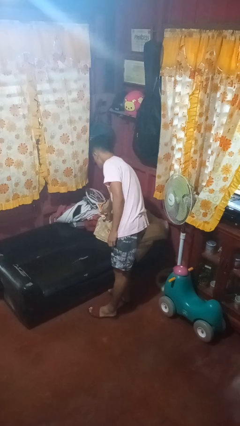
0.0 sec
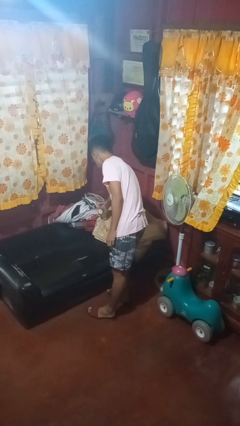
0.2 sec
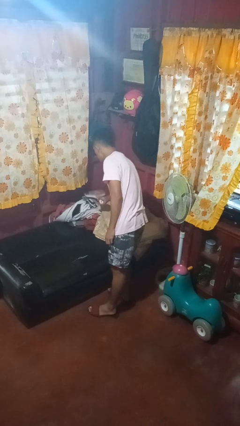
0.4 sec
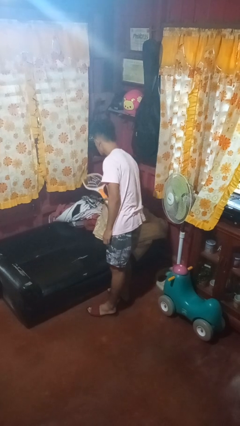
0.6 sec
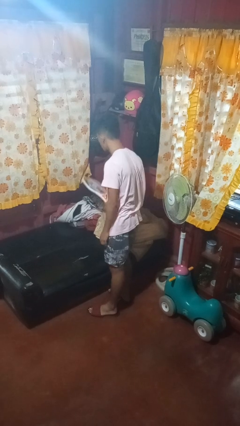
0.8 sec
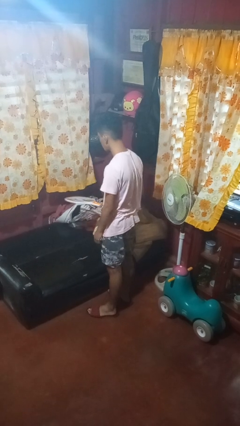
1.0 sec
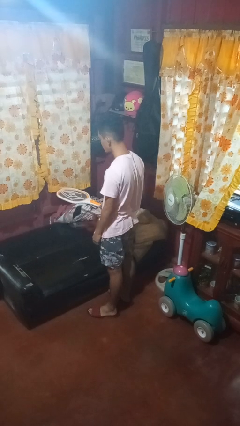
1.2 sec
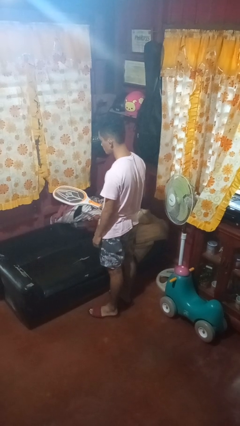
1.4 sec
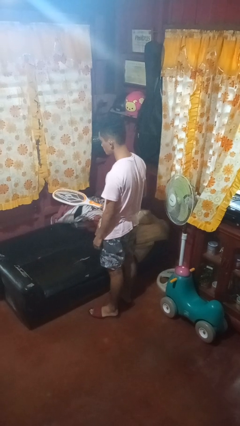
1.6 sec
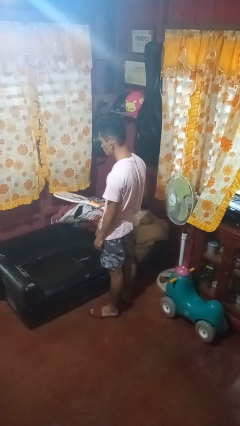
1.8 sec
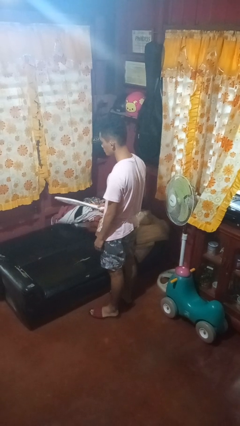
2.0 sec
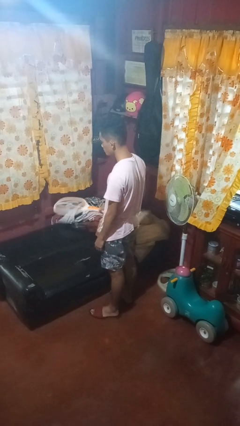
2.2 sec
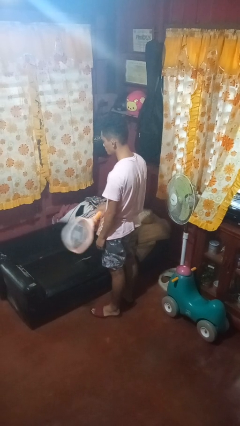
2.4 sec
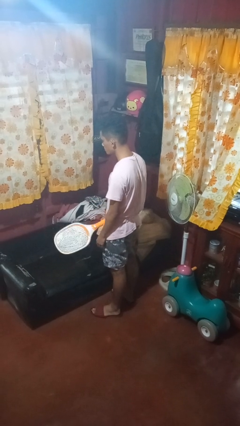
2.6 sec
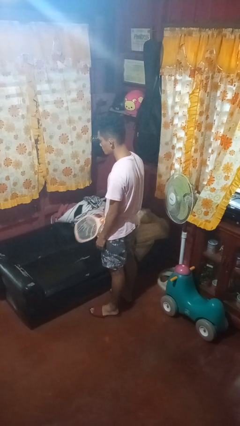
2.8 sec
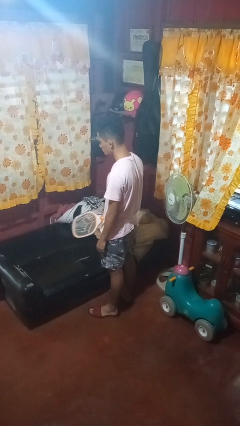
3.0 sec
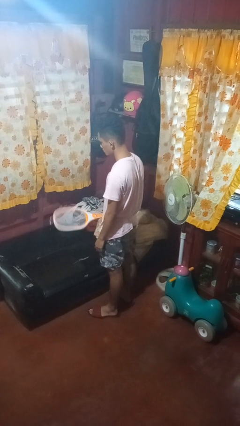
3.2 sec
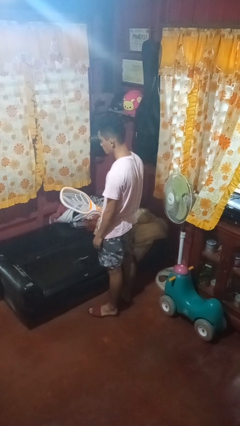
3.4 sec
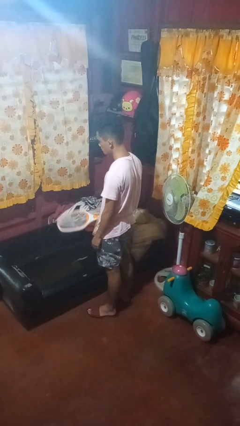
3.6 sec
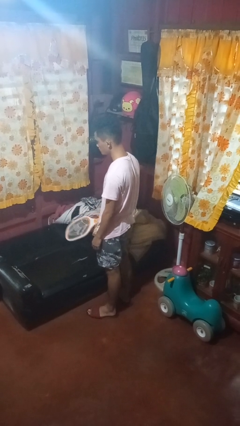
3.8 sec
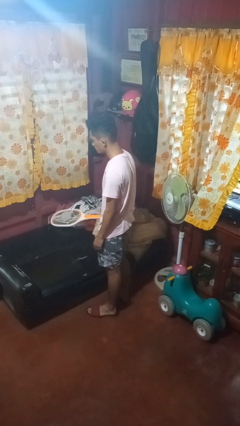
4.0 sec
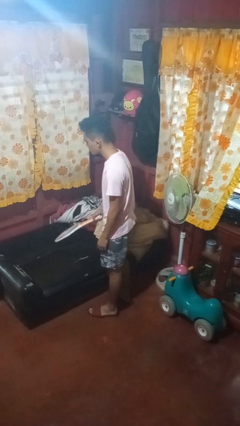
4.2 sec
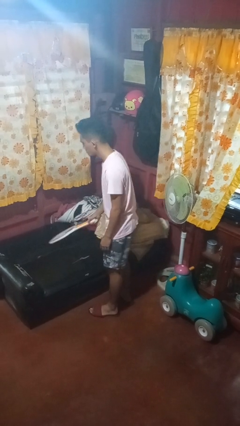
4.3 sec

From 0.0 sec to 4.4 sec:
person picks up object from couch

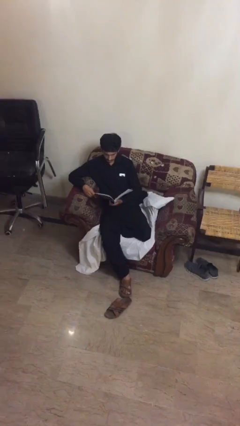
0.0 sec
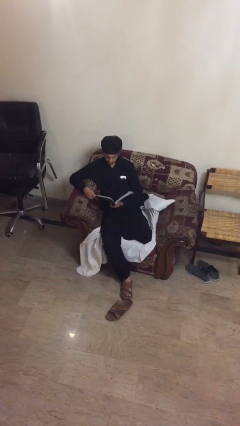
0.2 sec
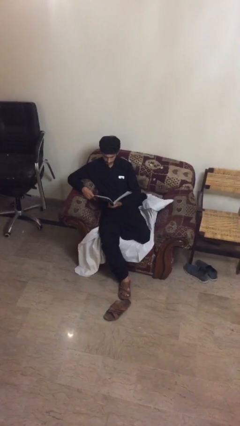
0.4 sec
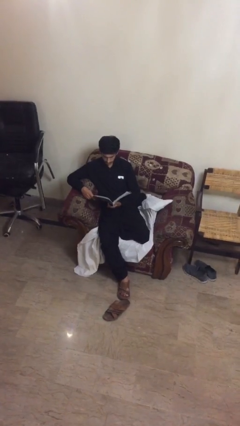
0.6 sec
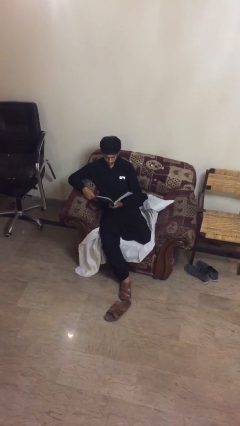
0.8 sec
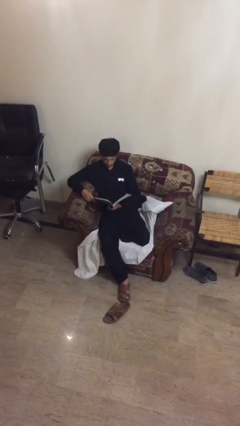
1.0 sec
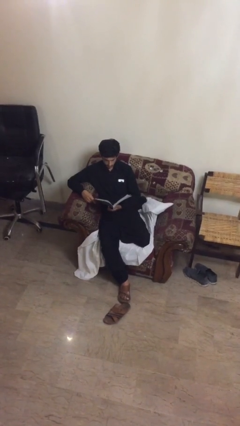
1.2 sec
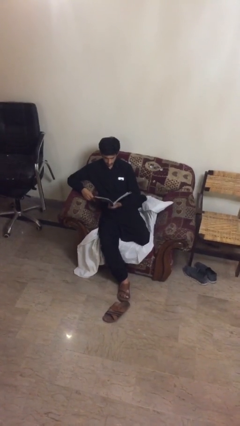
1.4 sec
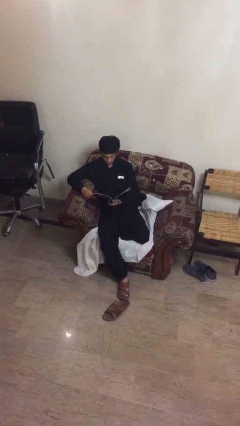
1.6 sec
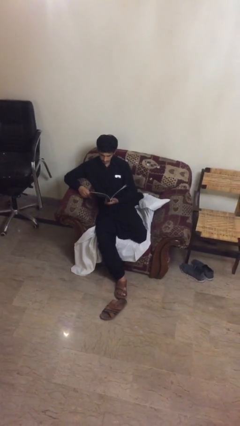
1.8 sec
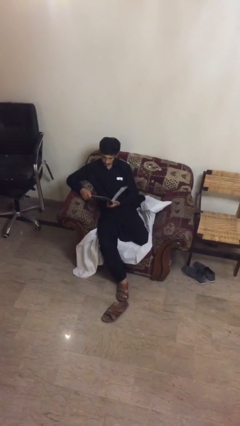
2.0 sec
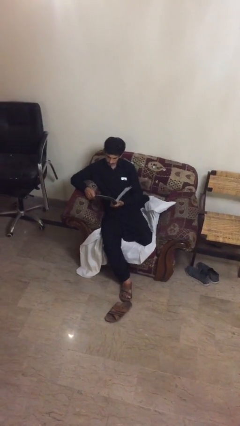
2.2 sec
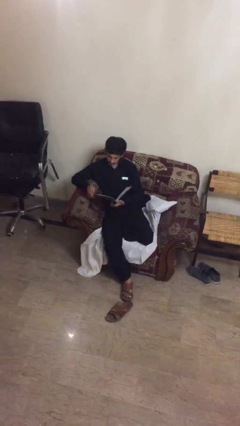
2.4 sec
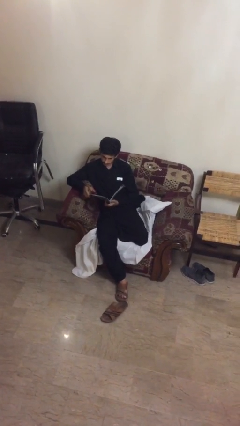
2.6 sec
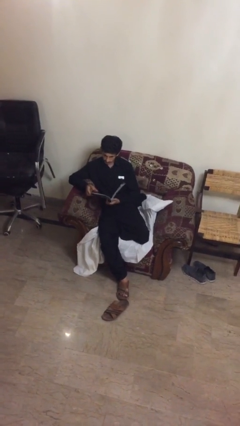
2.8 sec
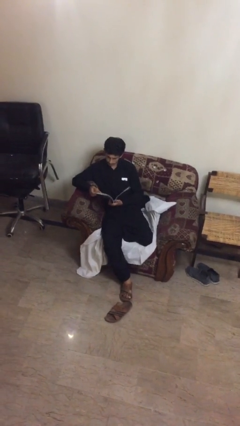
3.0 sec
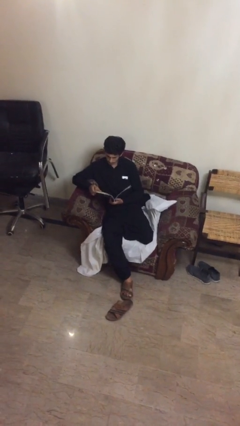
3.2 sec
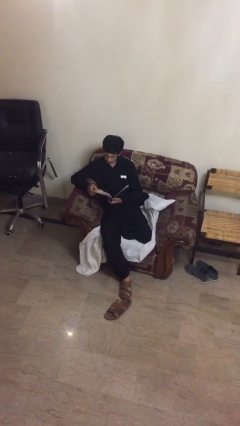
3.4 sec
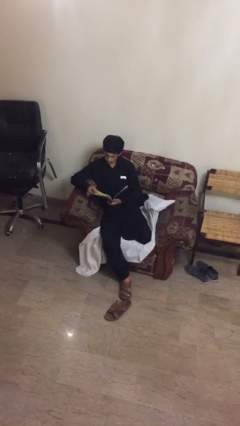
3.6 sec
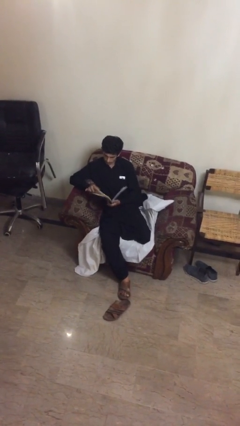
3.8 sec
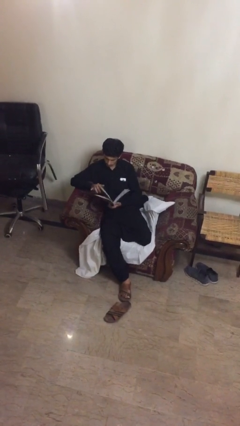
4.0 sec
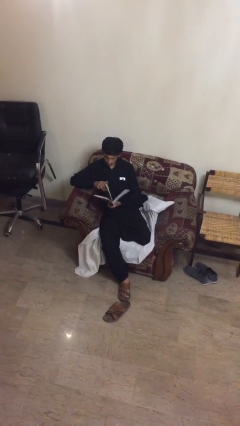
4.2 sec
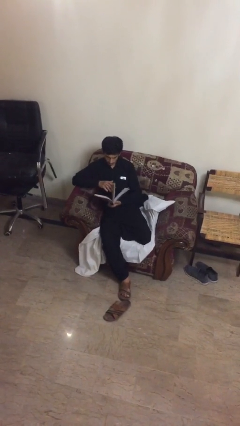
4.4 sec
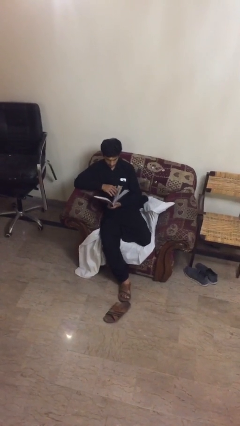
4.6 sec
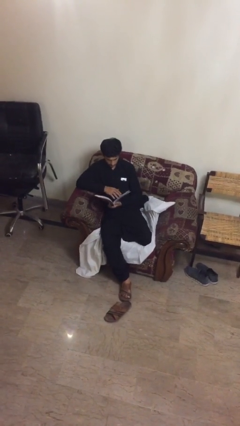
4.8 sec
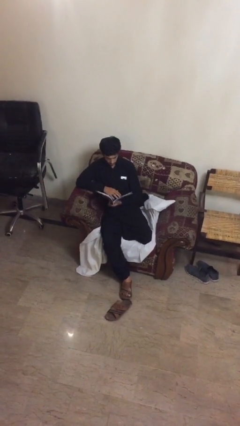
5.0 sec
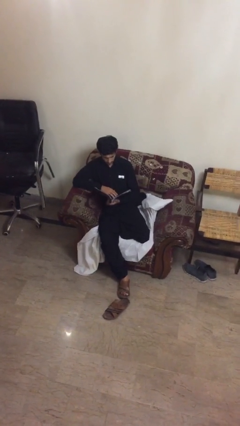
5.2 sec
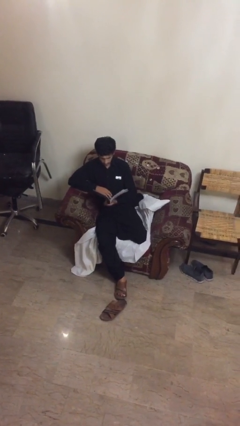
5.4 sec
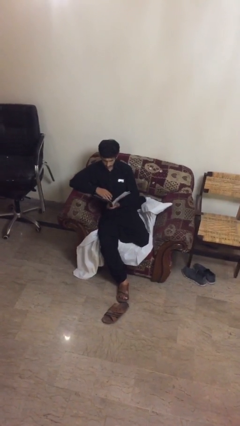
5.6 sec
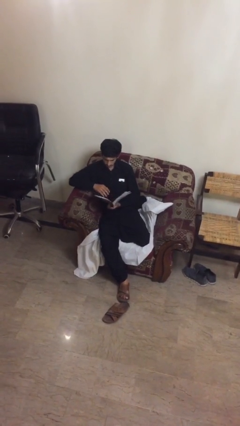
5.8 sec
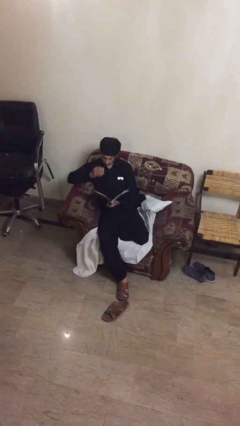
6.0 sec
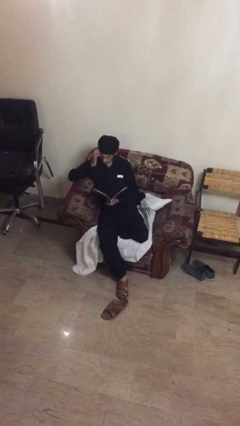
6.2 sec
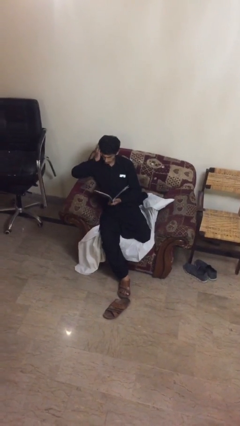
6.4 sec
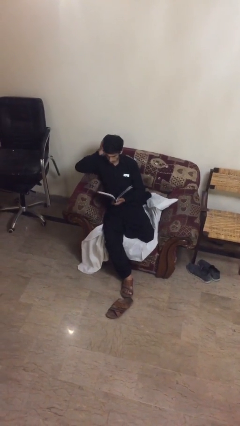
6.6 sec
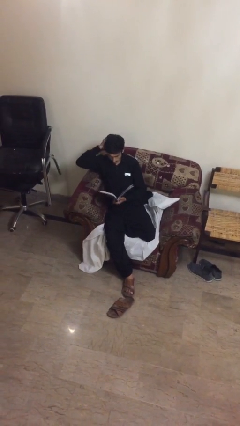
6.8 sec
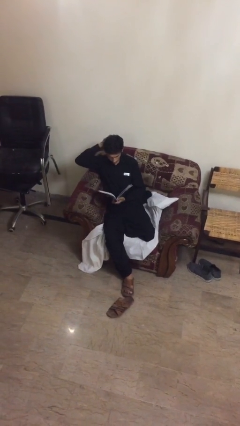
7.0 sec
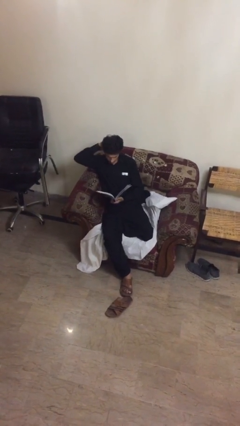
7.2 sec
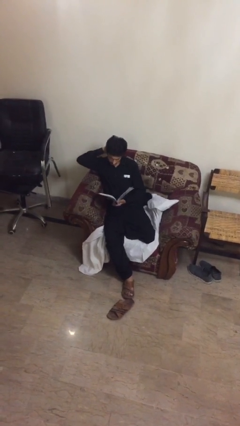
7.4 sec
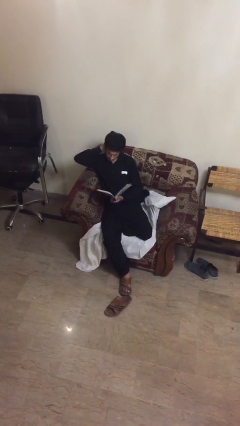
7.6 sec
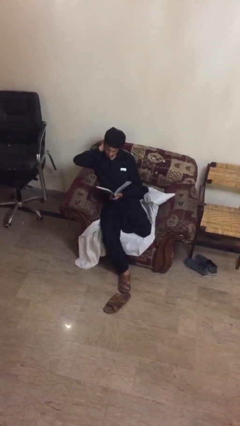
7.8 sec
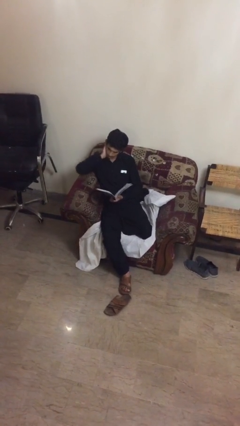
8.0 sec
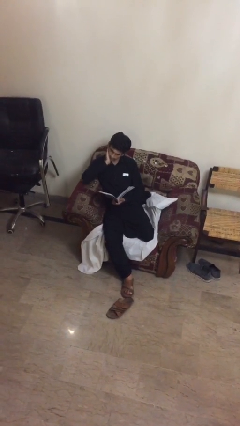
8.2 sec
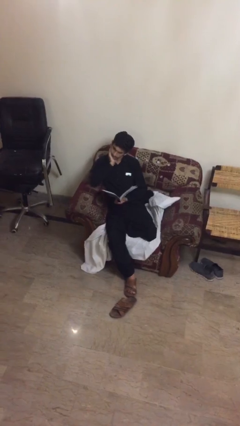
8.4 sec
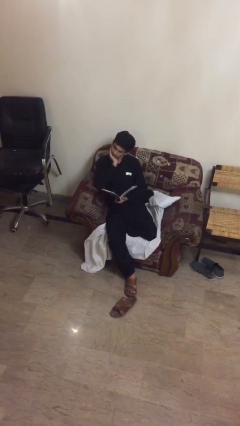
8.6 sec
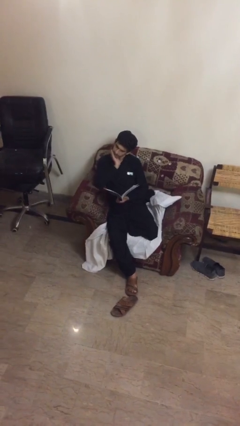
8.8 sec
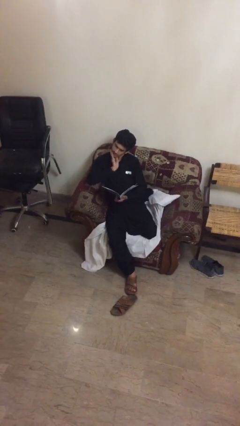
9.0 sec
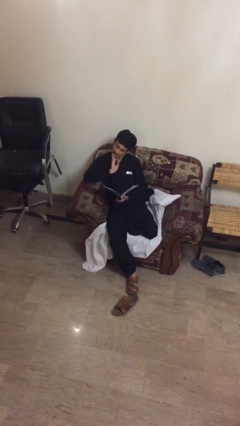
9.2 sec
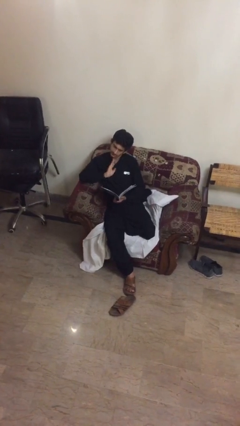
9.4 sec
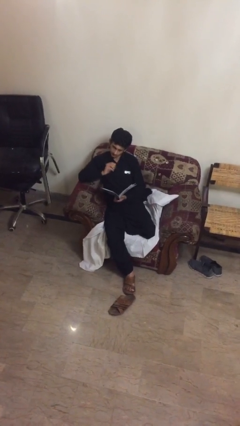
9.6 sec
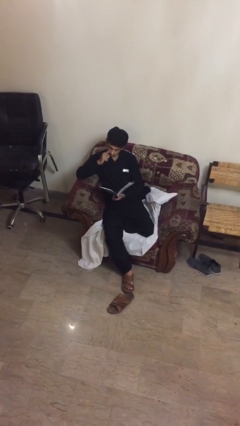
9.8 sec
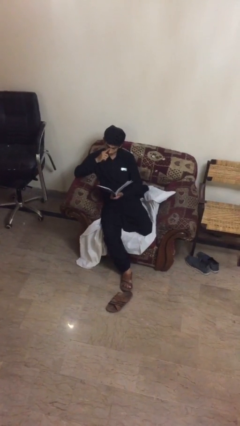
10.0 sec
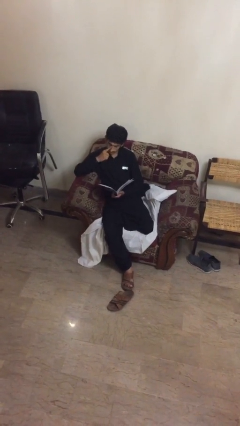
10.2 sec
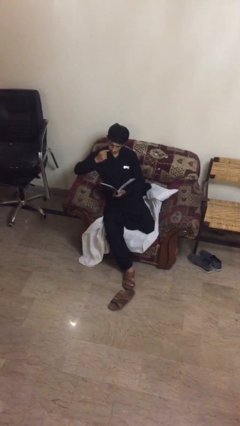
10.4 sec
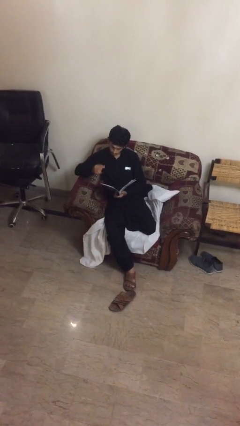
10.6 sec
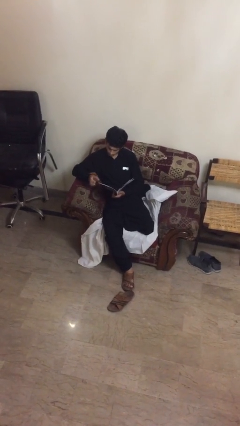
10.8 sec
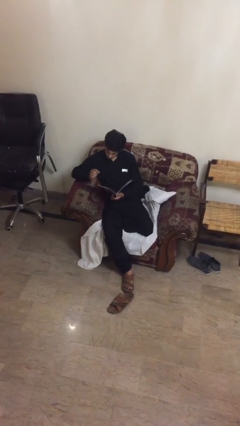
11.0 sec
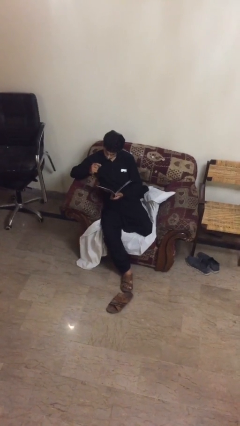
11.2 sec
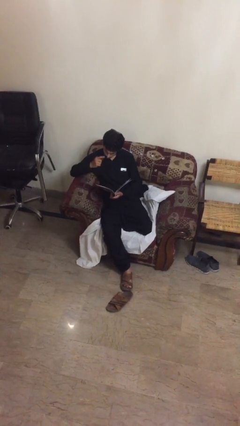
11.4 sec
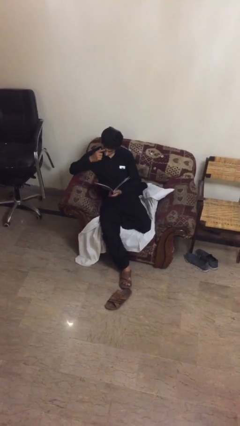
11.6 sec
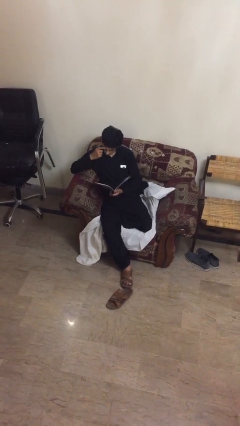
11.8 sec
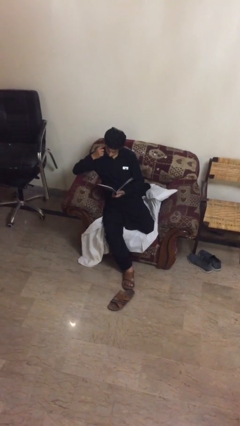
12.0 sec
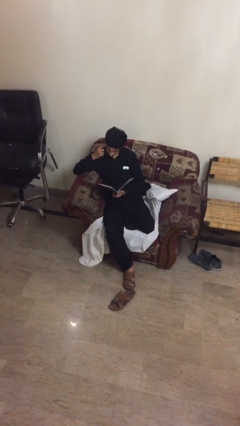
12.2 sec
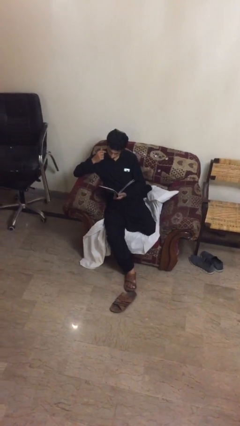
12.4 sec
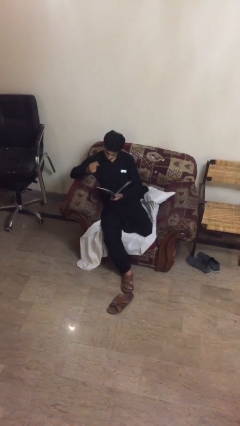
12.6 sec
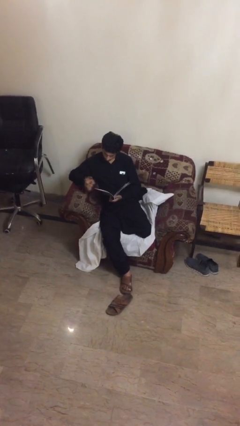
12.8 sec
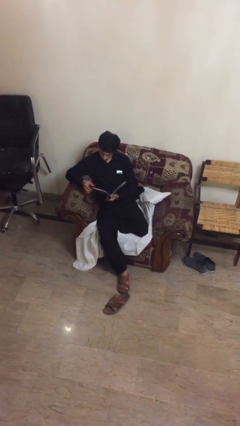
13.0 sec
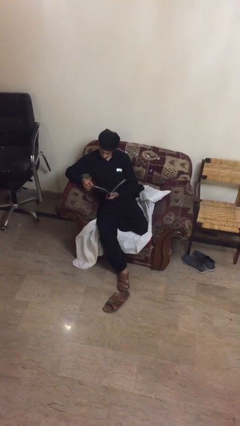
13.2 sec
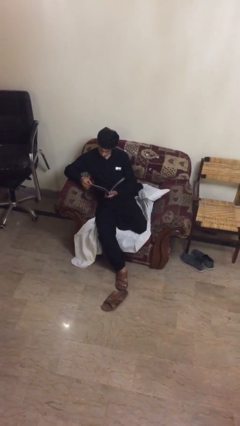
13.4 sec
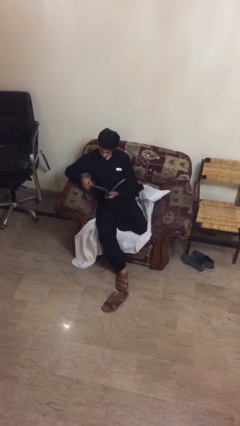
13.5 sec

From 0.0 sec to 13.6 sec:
person reads document

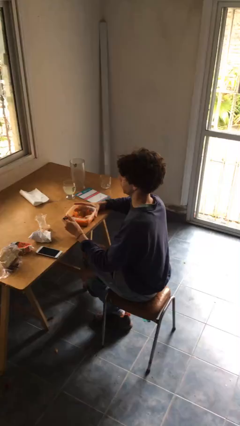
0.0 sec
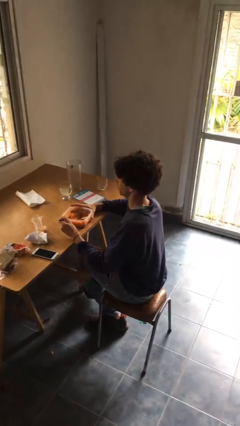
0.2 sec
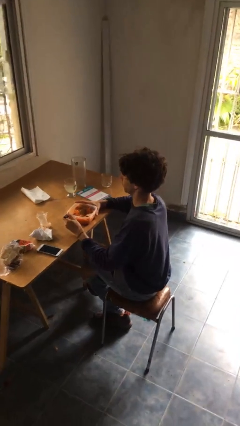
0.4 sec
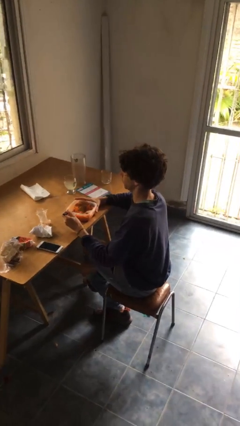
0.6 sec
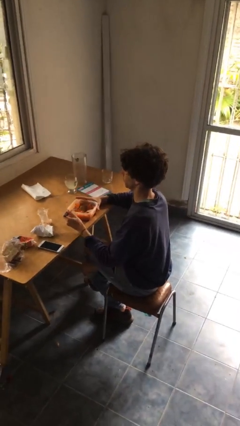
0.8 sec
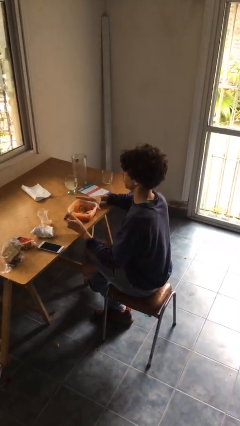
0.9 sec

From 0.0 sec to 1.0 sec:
person eats with utensil
